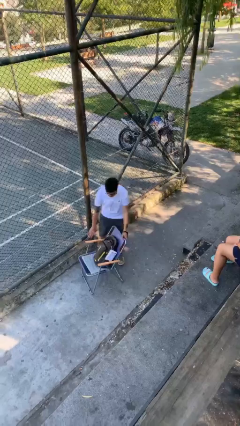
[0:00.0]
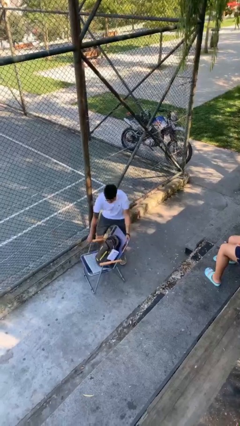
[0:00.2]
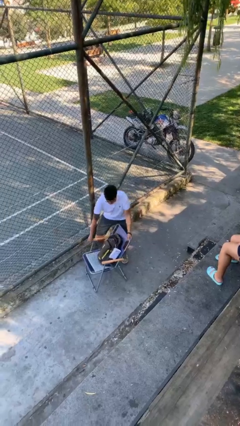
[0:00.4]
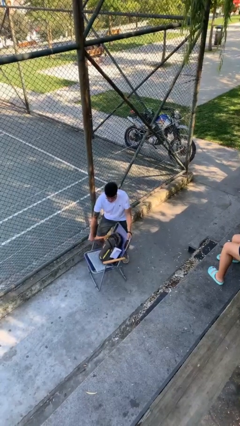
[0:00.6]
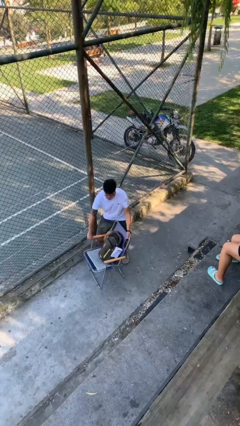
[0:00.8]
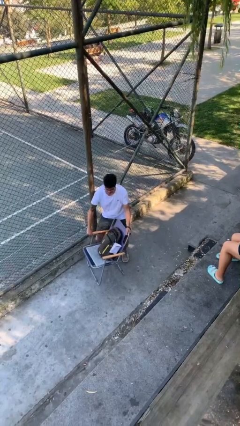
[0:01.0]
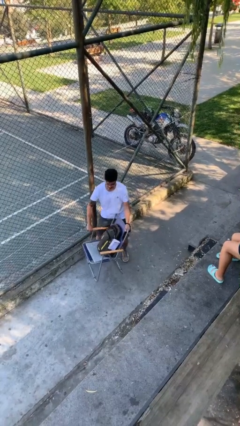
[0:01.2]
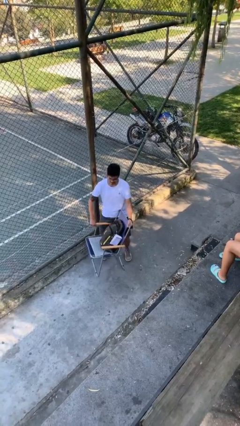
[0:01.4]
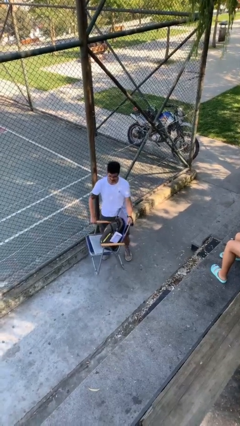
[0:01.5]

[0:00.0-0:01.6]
person picks up object from floor

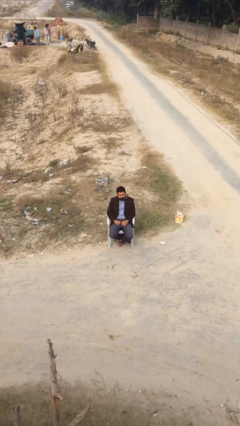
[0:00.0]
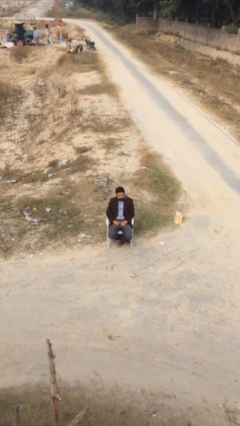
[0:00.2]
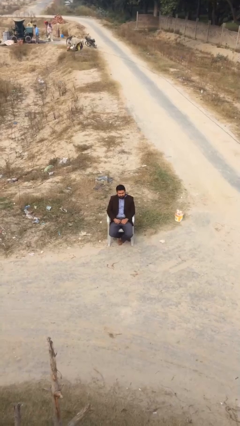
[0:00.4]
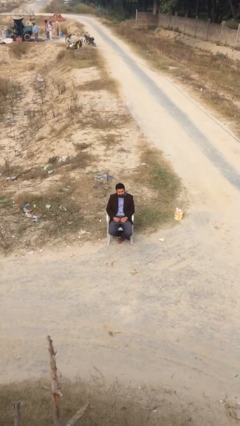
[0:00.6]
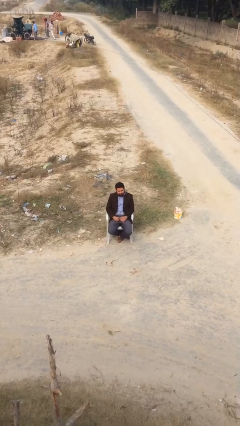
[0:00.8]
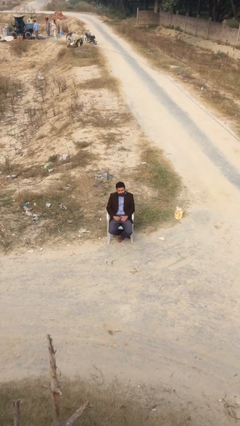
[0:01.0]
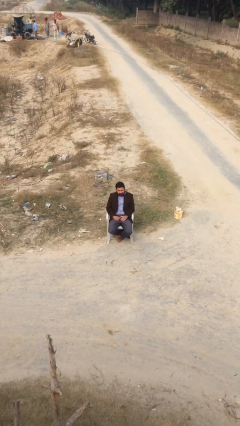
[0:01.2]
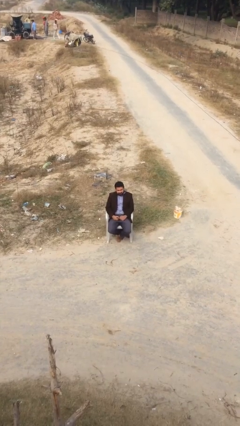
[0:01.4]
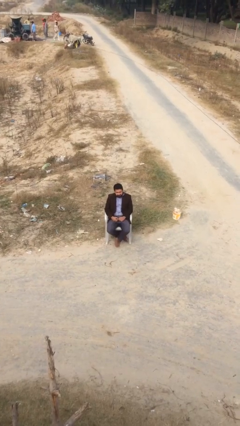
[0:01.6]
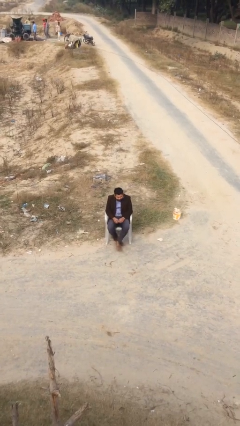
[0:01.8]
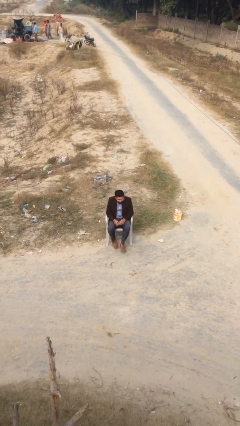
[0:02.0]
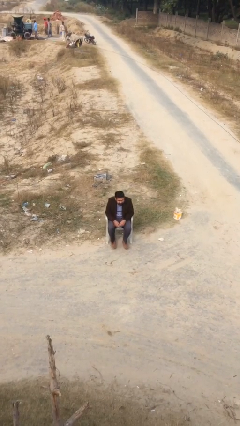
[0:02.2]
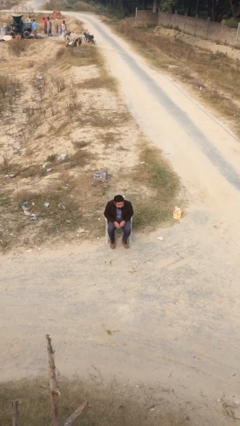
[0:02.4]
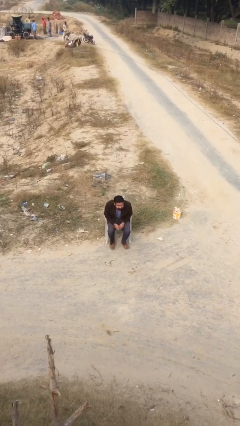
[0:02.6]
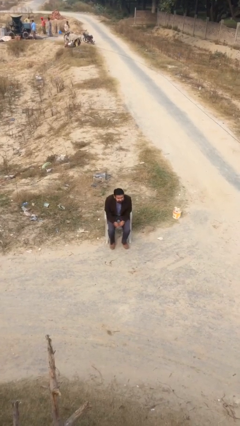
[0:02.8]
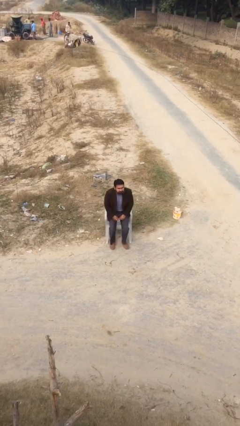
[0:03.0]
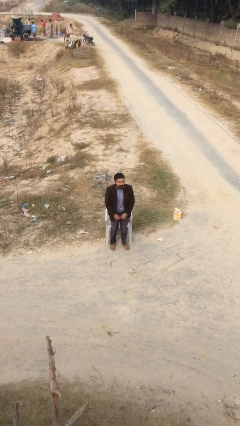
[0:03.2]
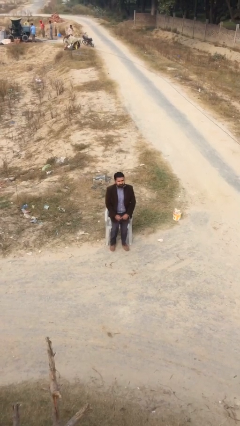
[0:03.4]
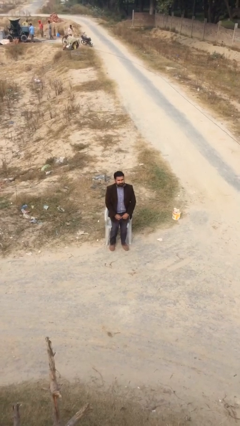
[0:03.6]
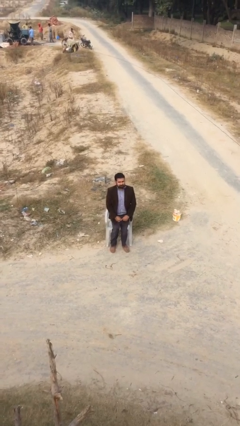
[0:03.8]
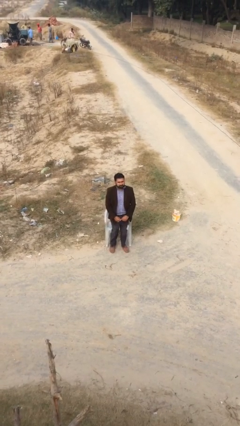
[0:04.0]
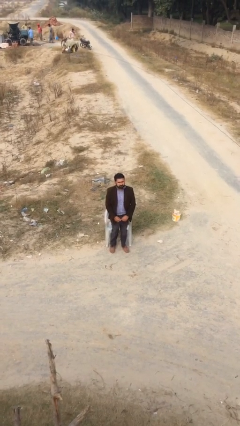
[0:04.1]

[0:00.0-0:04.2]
person stands up

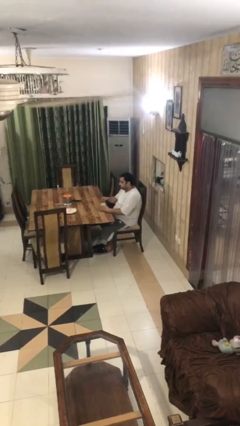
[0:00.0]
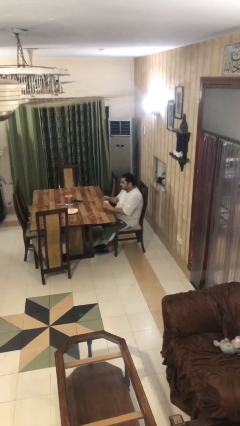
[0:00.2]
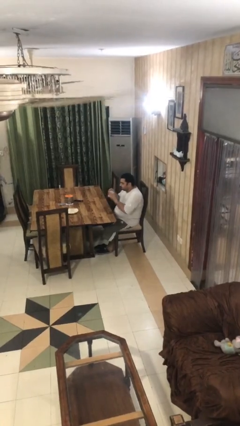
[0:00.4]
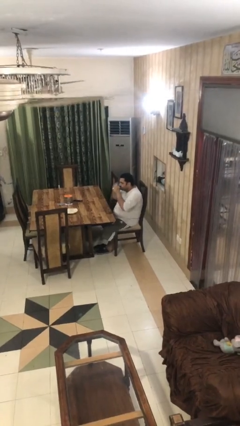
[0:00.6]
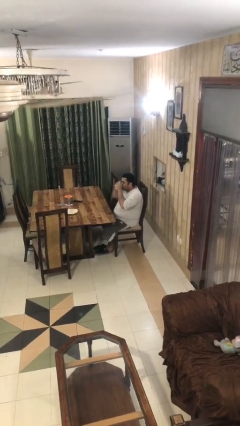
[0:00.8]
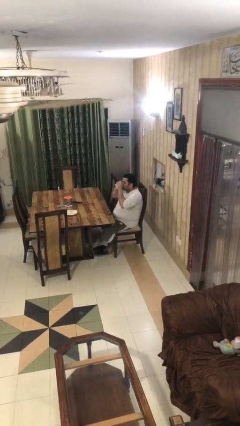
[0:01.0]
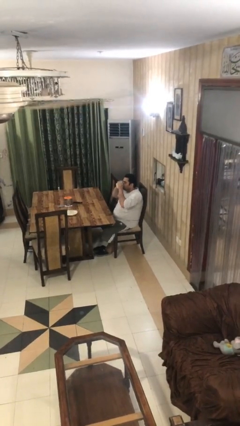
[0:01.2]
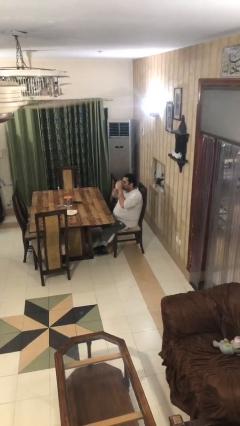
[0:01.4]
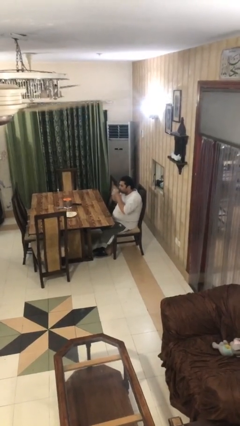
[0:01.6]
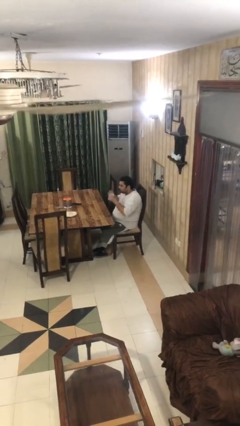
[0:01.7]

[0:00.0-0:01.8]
person drinks from mug

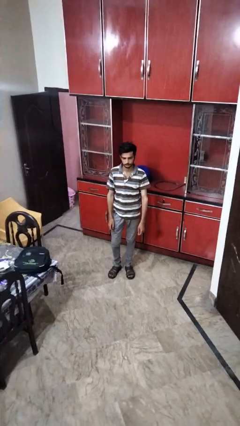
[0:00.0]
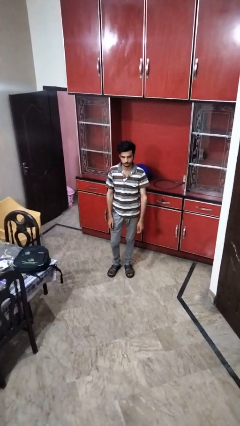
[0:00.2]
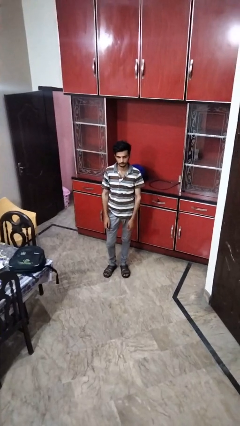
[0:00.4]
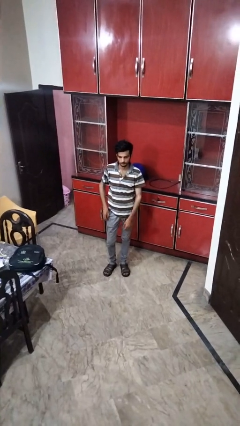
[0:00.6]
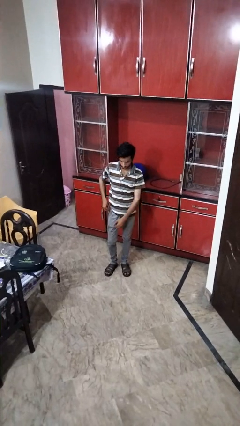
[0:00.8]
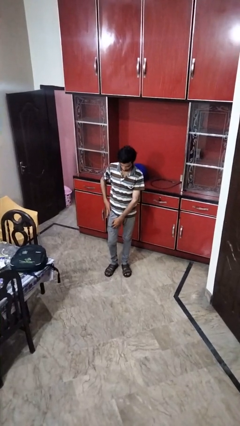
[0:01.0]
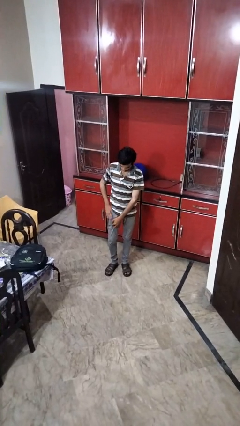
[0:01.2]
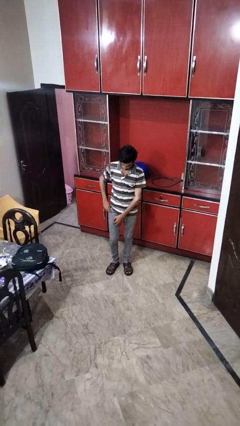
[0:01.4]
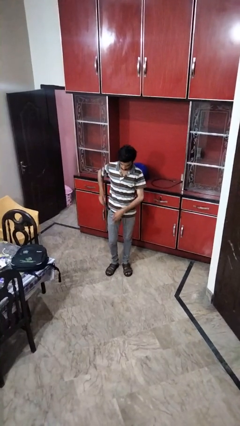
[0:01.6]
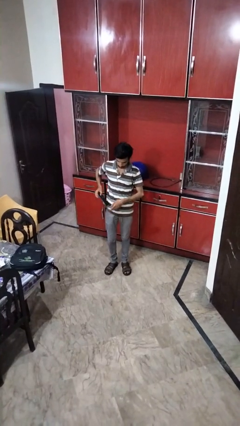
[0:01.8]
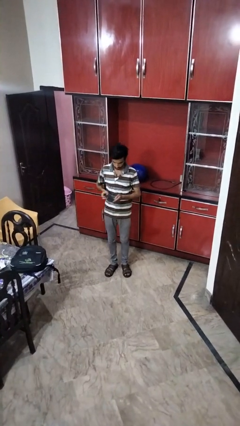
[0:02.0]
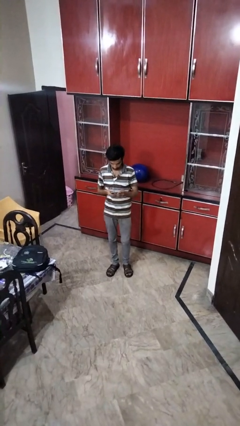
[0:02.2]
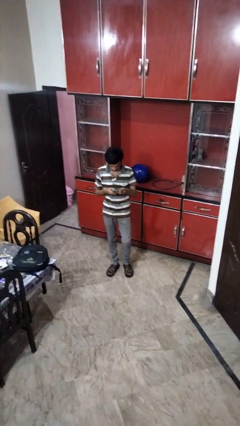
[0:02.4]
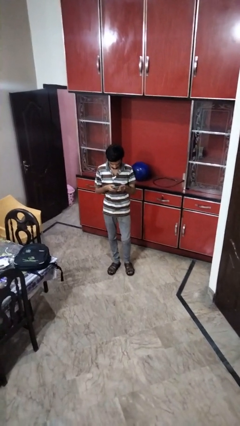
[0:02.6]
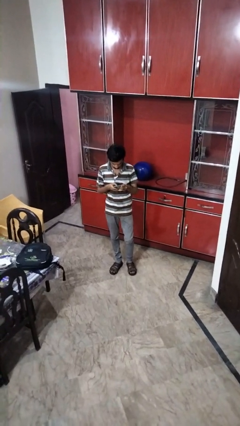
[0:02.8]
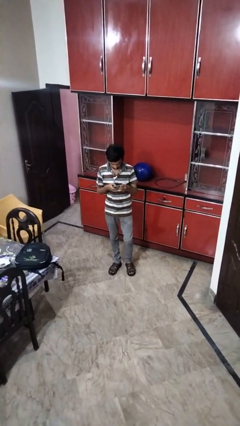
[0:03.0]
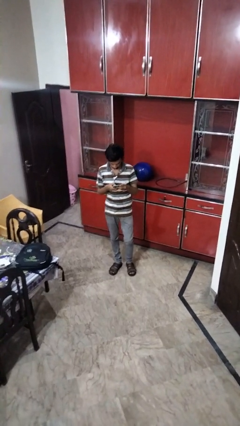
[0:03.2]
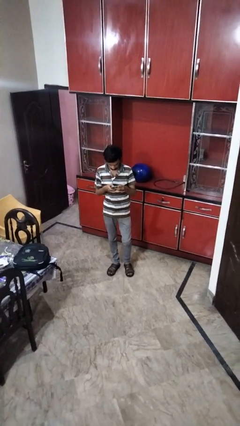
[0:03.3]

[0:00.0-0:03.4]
person takes phone from pocket

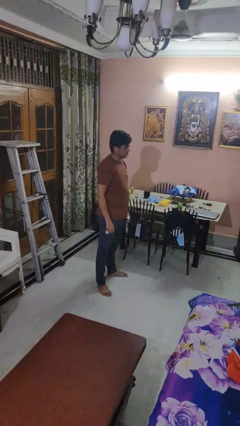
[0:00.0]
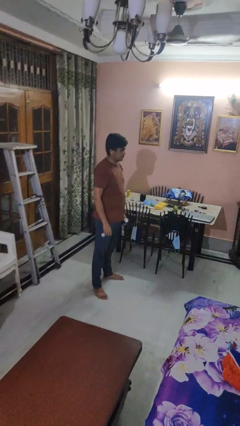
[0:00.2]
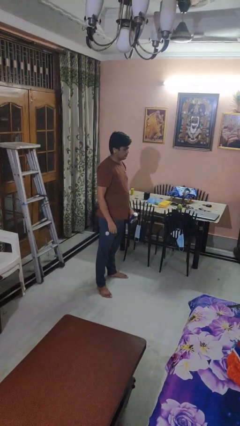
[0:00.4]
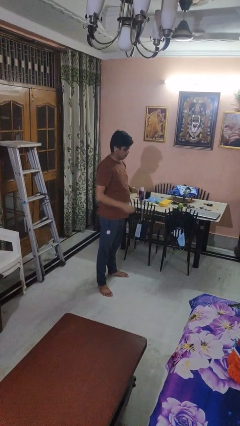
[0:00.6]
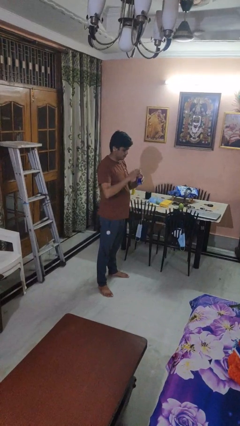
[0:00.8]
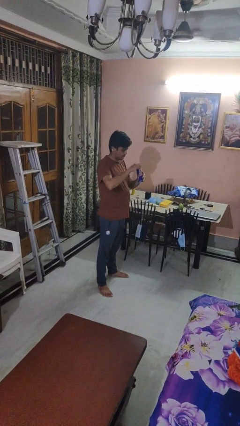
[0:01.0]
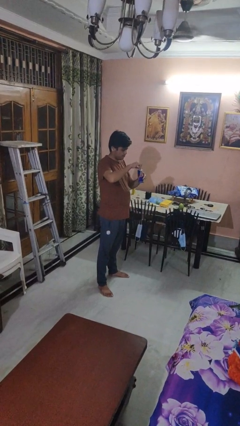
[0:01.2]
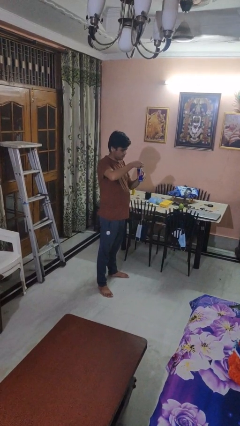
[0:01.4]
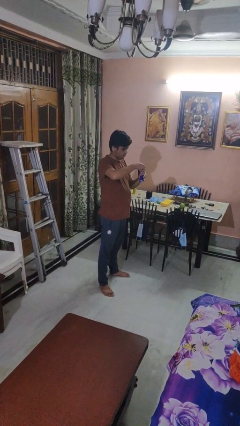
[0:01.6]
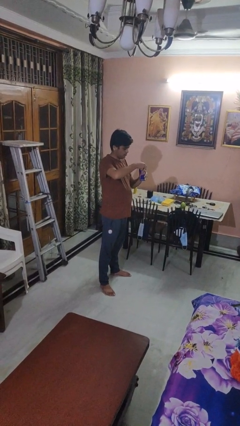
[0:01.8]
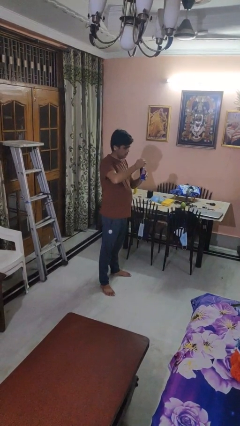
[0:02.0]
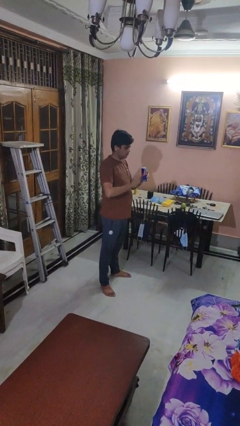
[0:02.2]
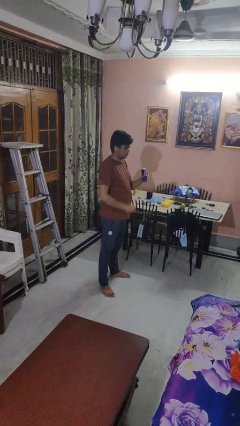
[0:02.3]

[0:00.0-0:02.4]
person opens beverage can

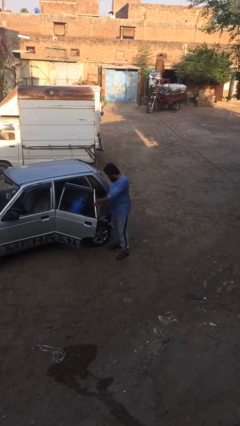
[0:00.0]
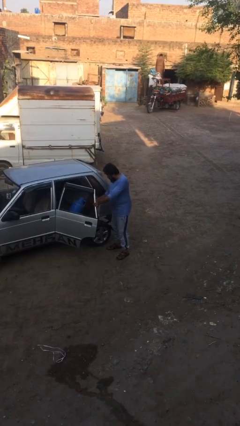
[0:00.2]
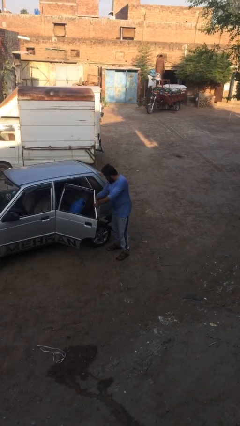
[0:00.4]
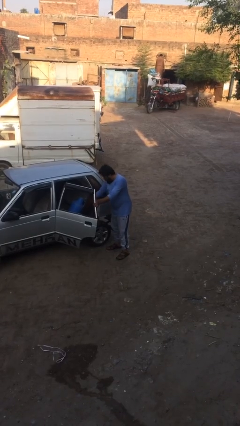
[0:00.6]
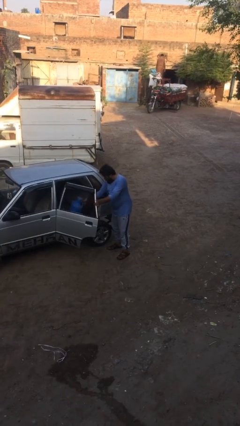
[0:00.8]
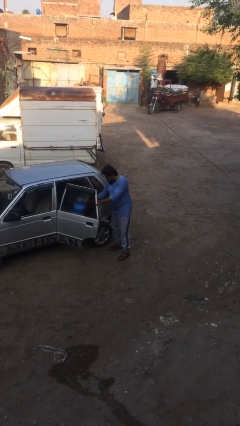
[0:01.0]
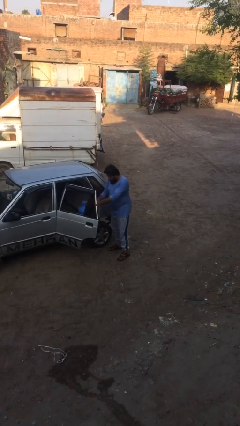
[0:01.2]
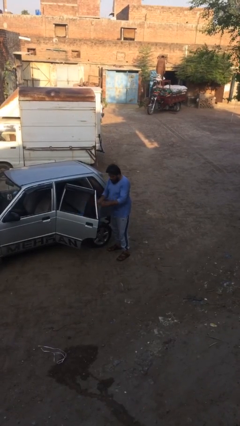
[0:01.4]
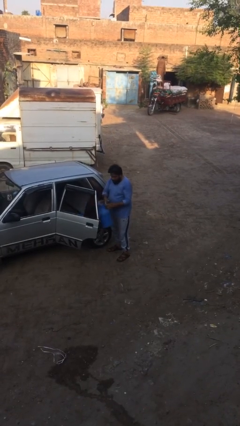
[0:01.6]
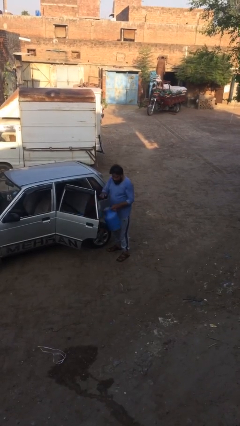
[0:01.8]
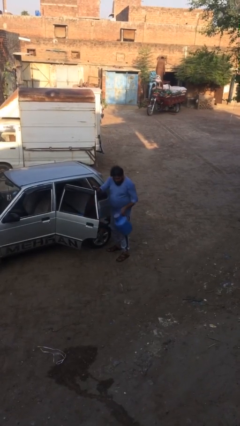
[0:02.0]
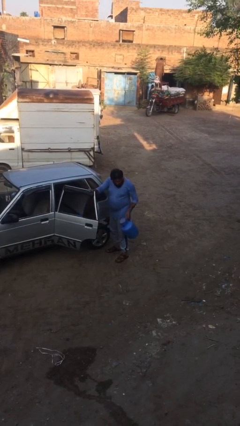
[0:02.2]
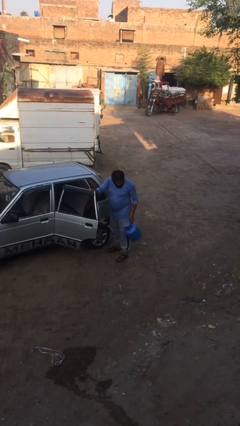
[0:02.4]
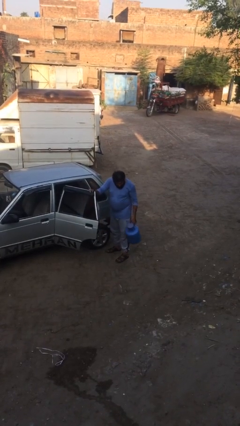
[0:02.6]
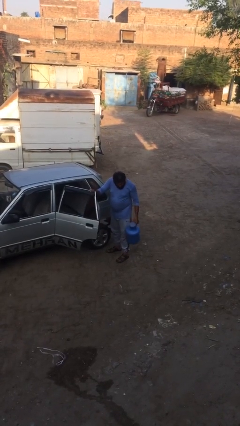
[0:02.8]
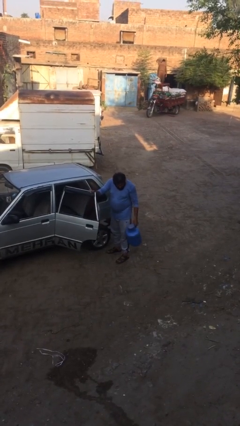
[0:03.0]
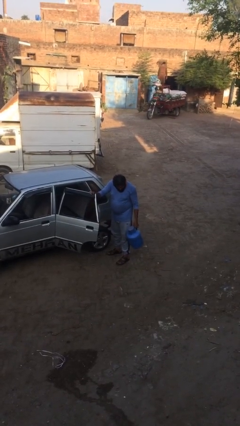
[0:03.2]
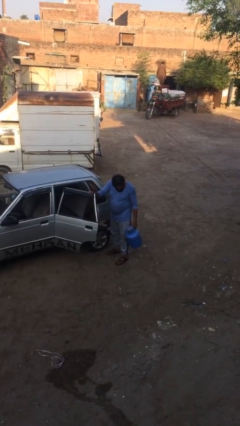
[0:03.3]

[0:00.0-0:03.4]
person unloads car

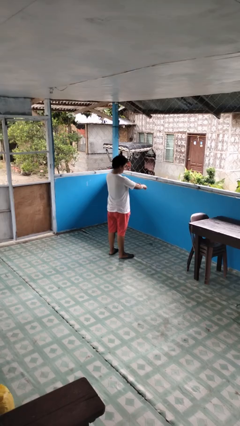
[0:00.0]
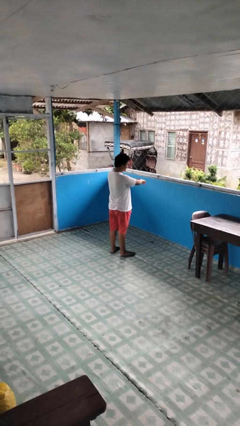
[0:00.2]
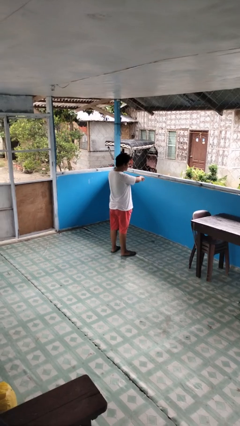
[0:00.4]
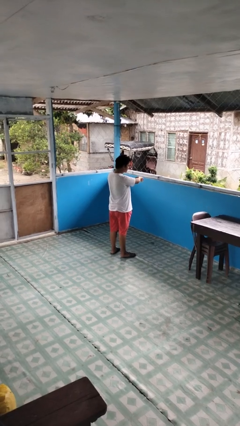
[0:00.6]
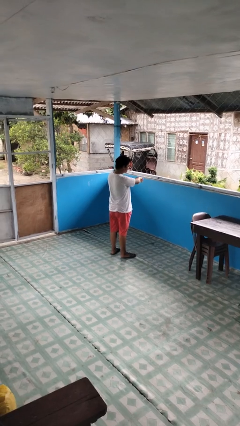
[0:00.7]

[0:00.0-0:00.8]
person swats bug
